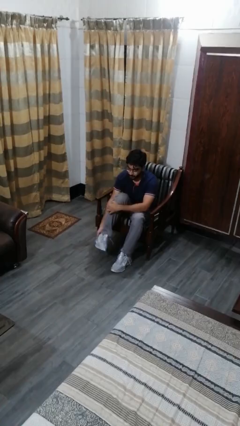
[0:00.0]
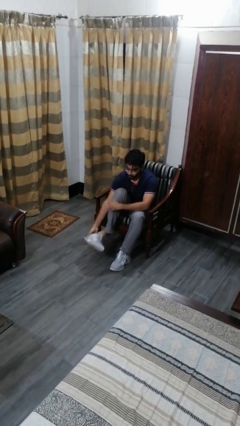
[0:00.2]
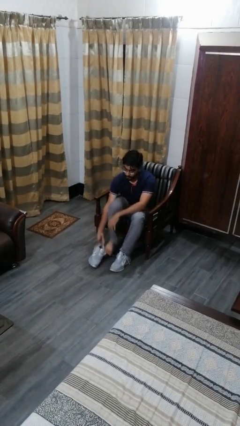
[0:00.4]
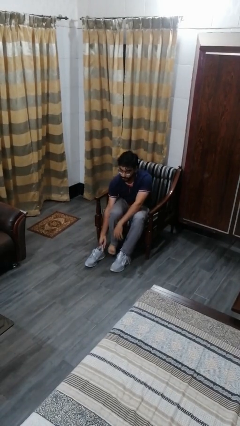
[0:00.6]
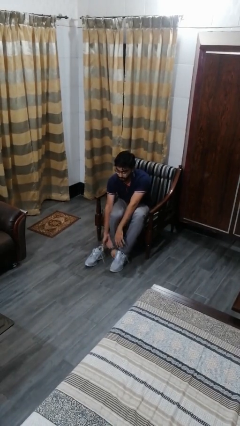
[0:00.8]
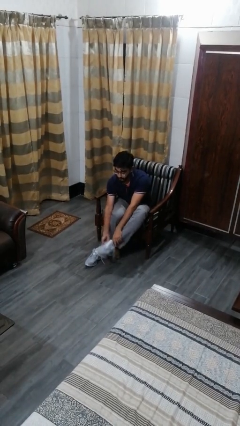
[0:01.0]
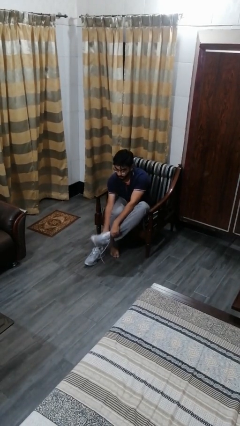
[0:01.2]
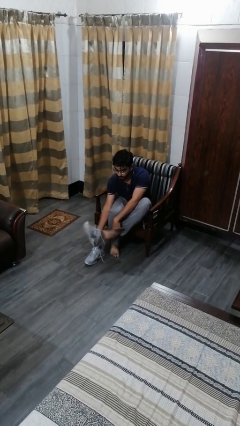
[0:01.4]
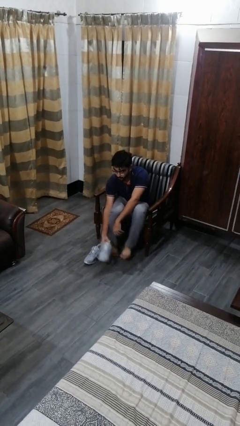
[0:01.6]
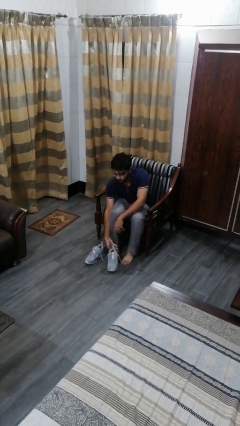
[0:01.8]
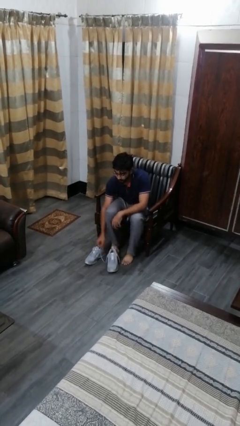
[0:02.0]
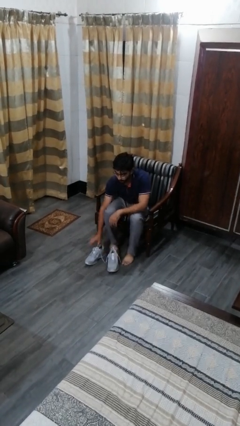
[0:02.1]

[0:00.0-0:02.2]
person takes off shoes

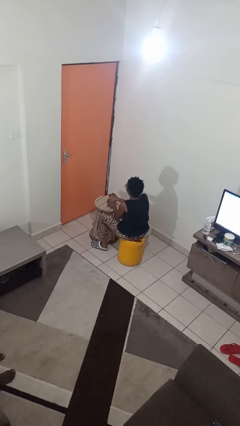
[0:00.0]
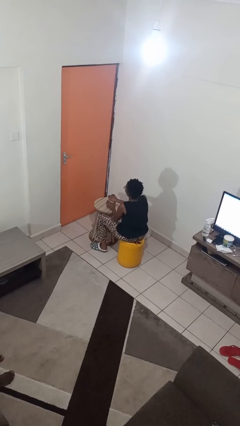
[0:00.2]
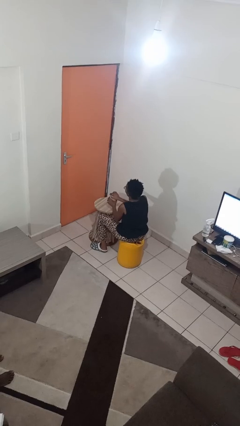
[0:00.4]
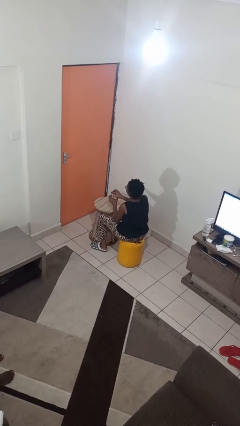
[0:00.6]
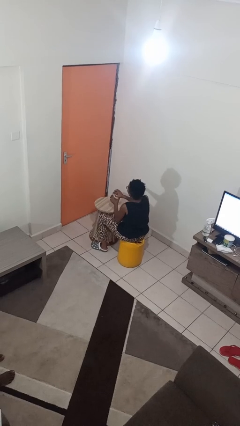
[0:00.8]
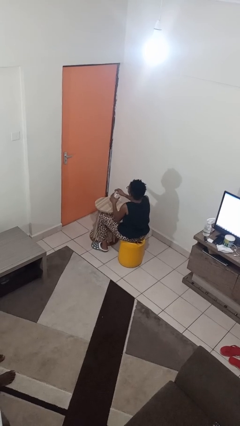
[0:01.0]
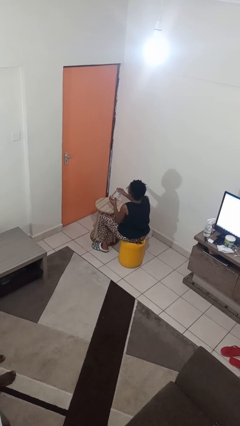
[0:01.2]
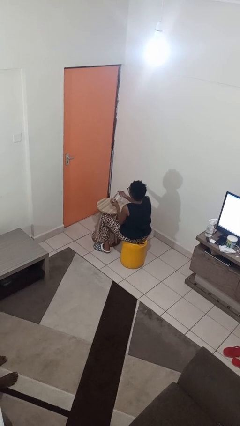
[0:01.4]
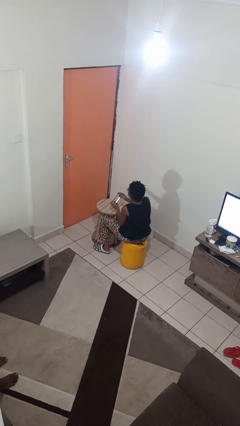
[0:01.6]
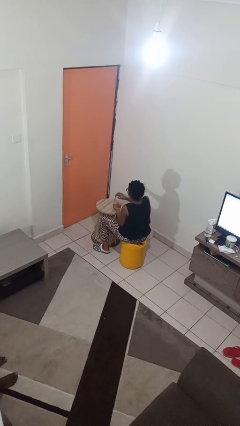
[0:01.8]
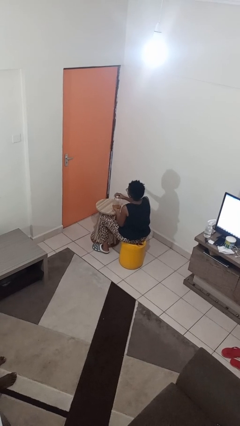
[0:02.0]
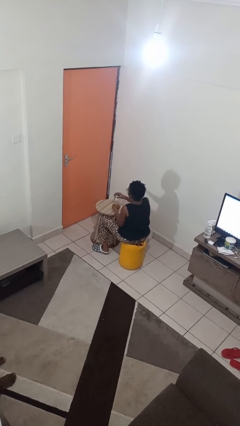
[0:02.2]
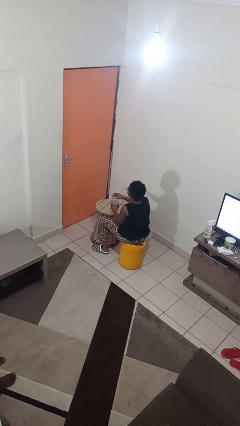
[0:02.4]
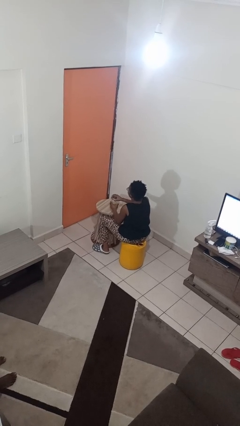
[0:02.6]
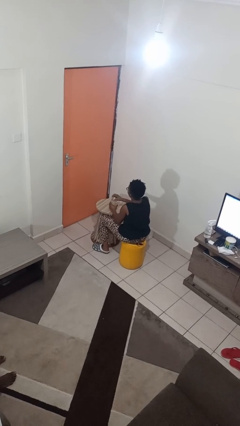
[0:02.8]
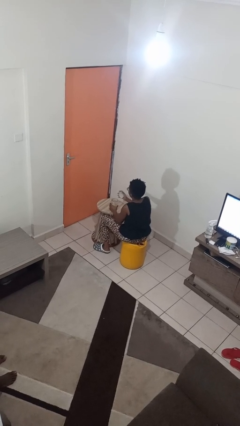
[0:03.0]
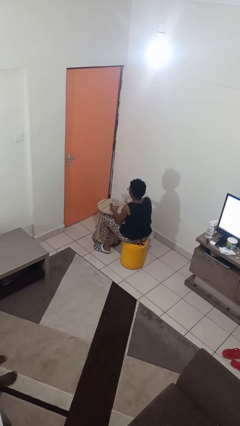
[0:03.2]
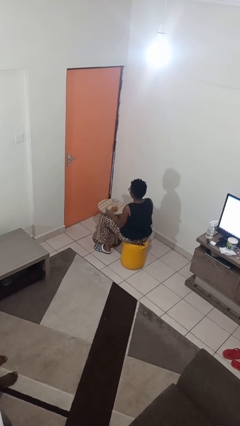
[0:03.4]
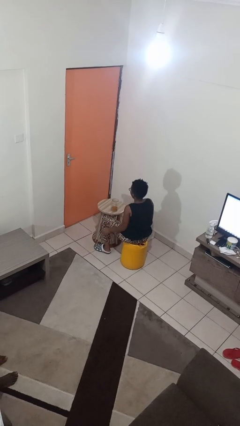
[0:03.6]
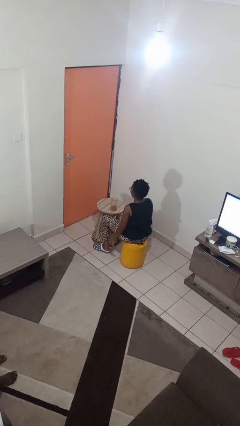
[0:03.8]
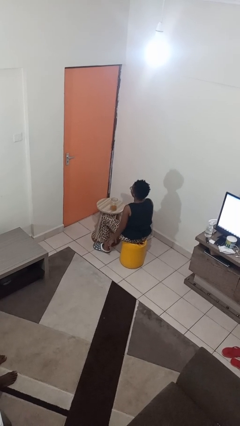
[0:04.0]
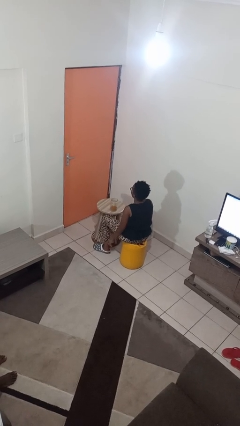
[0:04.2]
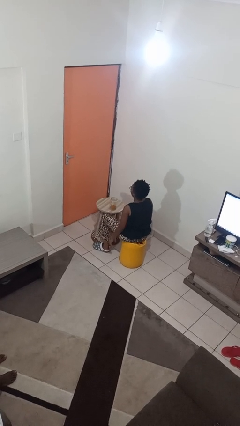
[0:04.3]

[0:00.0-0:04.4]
person opens jar

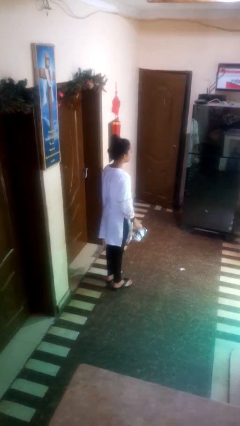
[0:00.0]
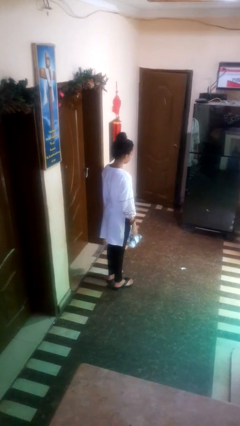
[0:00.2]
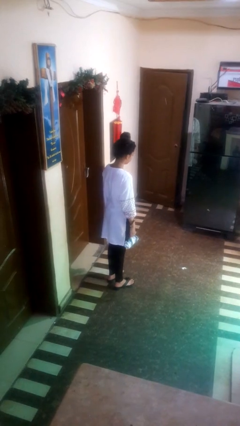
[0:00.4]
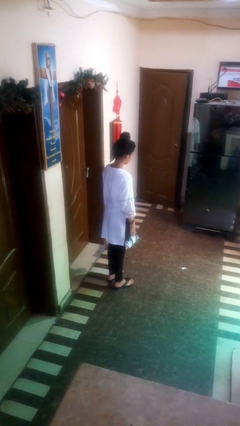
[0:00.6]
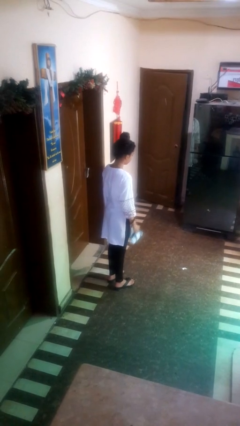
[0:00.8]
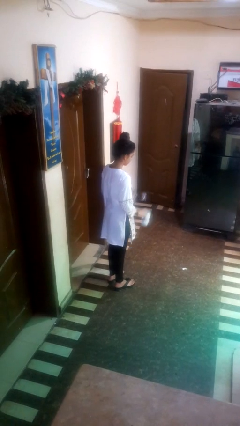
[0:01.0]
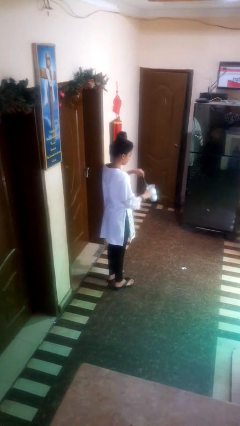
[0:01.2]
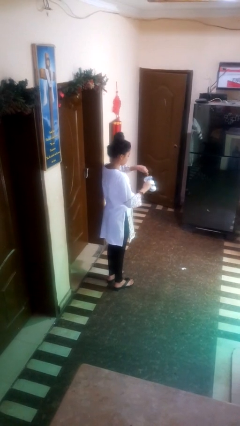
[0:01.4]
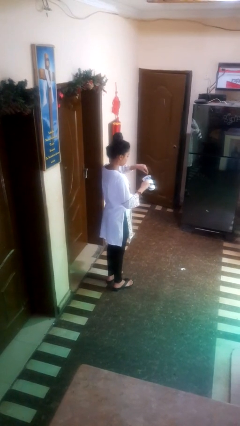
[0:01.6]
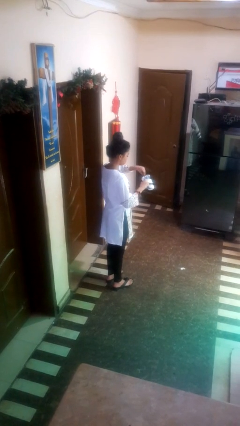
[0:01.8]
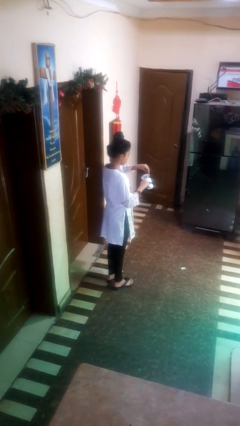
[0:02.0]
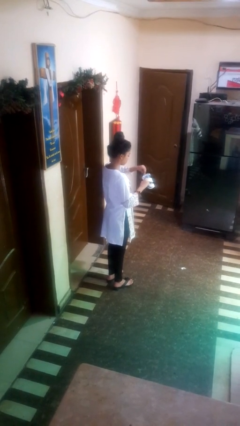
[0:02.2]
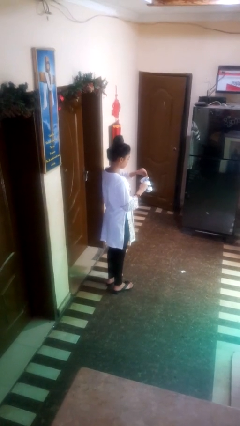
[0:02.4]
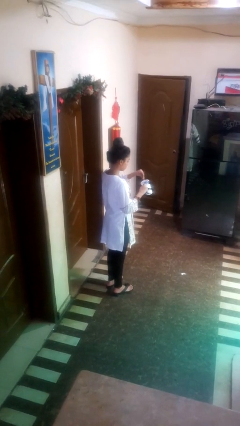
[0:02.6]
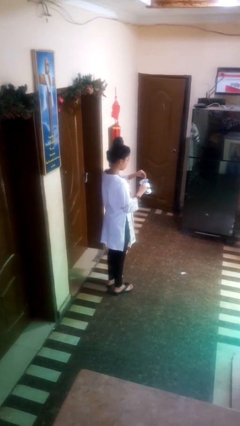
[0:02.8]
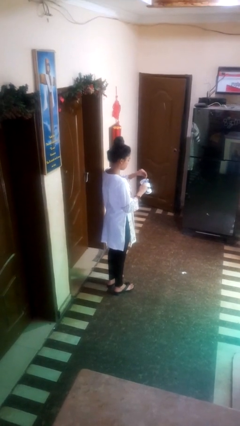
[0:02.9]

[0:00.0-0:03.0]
person stirs mug

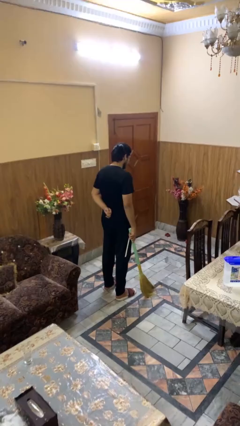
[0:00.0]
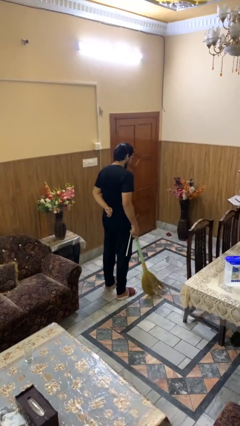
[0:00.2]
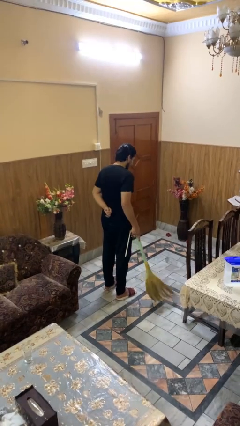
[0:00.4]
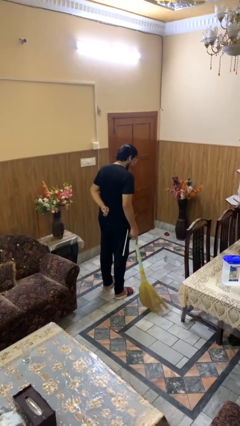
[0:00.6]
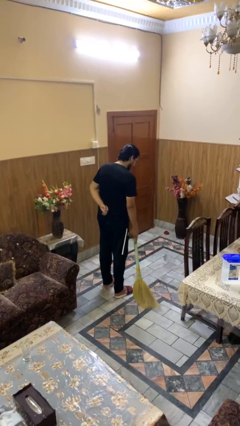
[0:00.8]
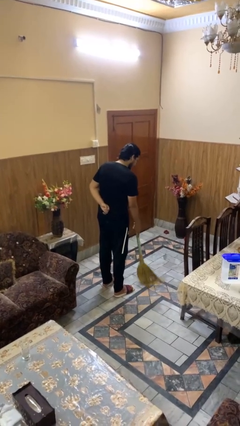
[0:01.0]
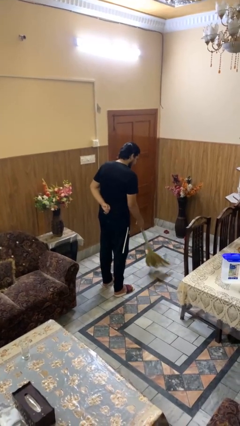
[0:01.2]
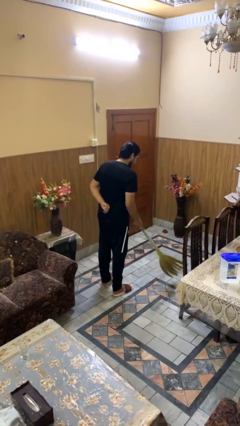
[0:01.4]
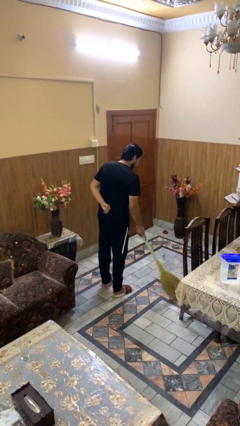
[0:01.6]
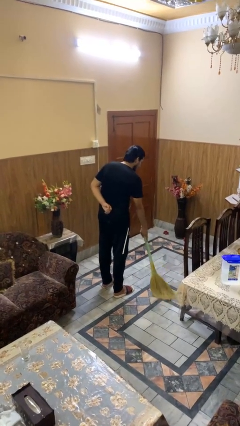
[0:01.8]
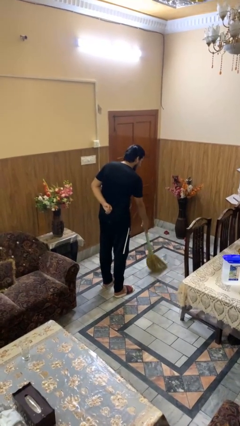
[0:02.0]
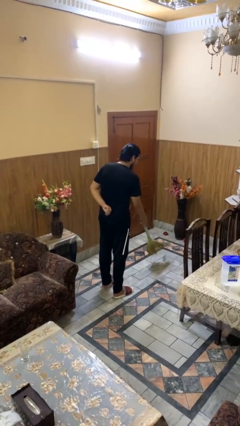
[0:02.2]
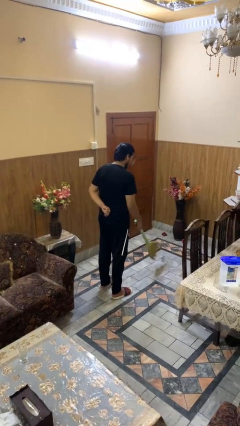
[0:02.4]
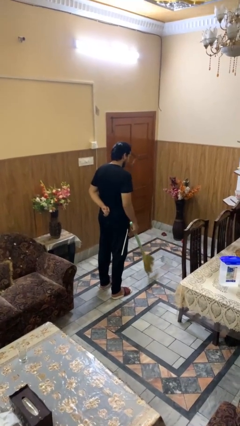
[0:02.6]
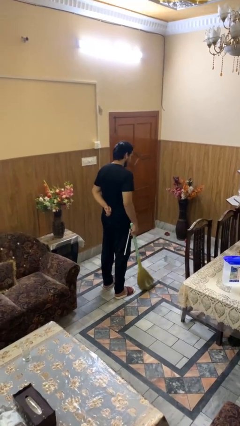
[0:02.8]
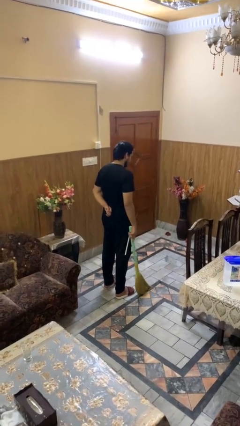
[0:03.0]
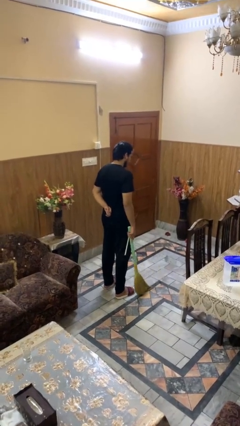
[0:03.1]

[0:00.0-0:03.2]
person sweeps floor

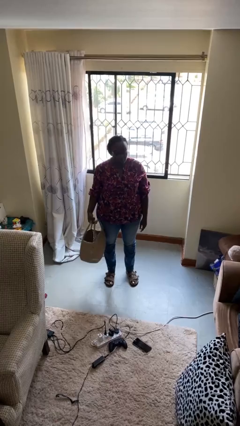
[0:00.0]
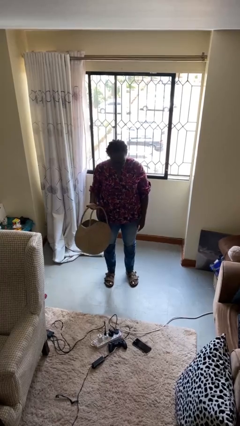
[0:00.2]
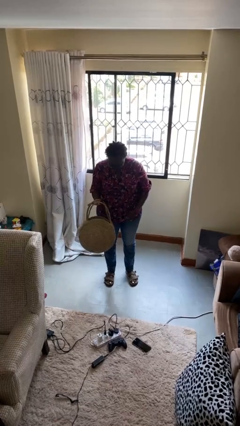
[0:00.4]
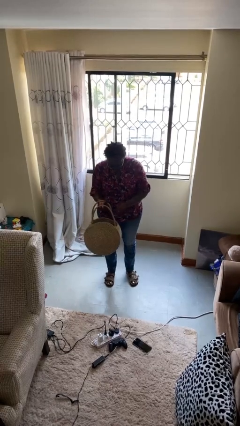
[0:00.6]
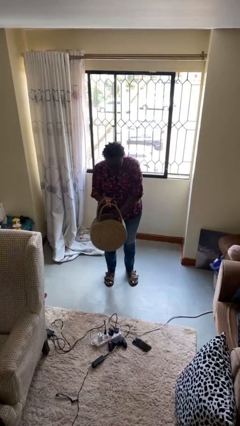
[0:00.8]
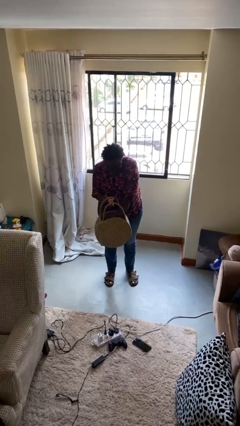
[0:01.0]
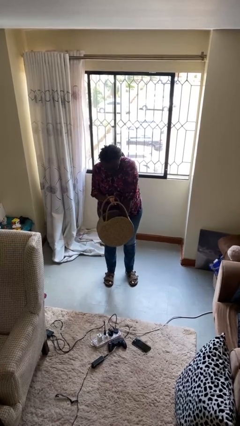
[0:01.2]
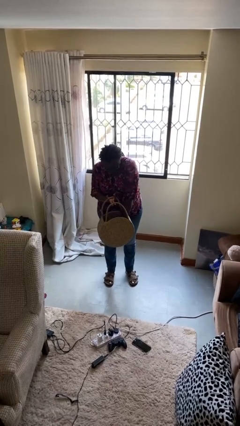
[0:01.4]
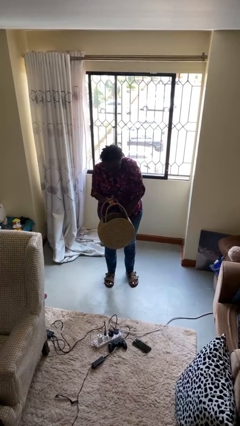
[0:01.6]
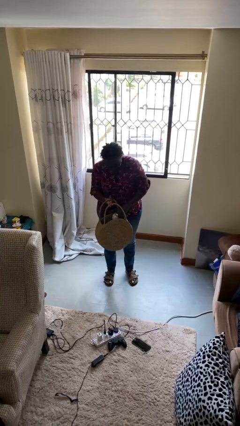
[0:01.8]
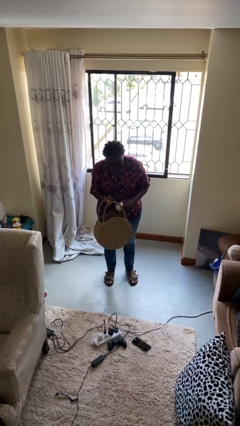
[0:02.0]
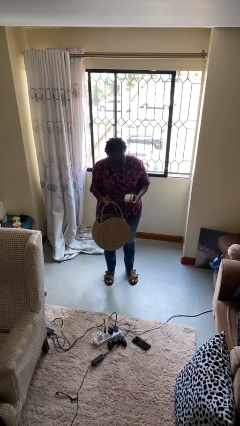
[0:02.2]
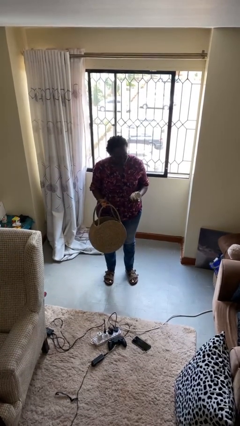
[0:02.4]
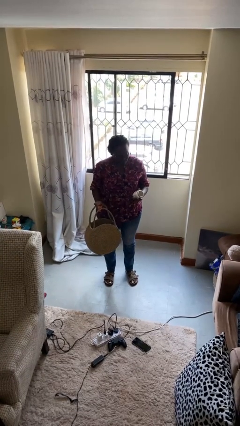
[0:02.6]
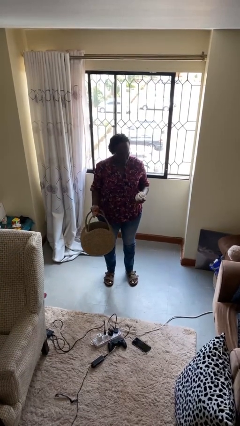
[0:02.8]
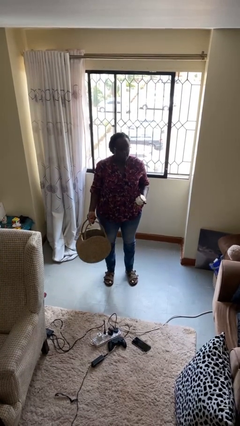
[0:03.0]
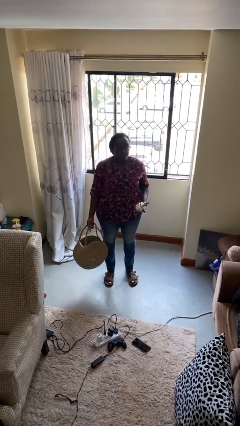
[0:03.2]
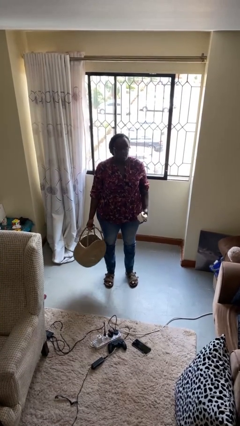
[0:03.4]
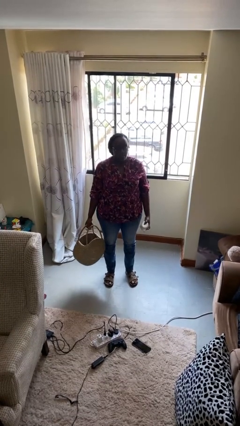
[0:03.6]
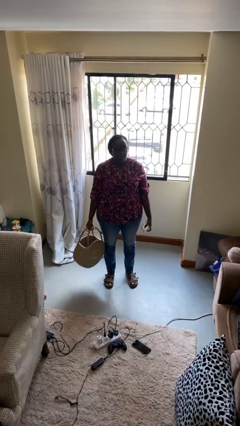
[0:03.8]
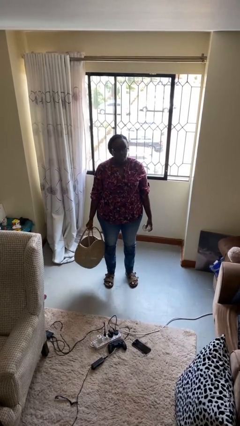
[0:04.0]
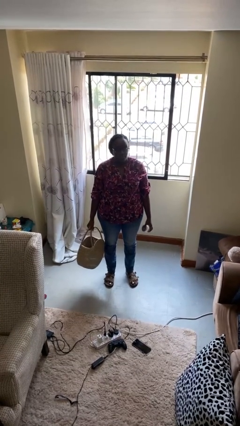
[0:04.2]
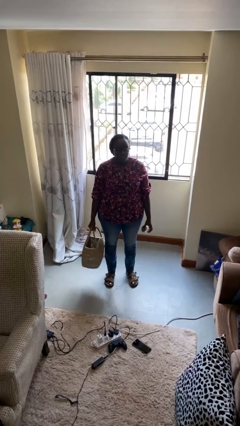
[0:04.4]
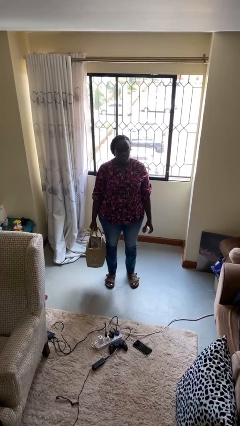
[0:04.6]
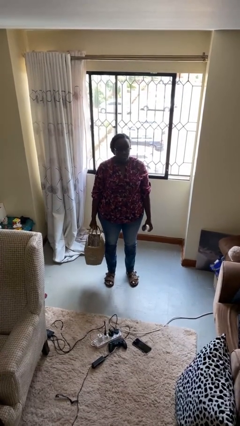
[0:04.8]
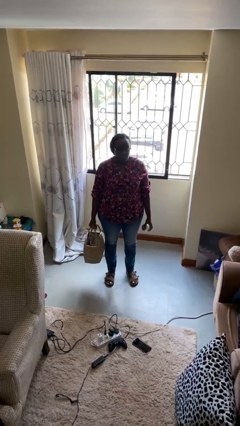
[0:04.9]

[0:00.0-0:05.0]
person takes object from basket
